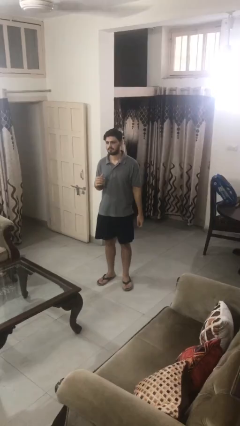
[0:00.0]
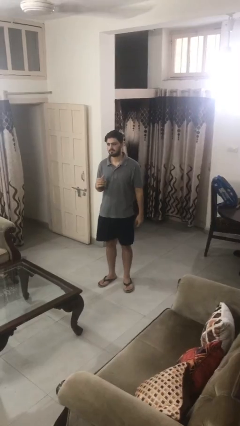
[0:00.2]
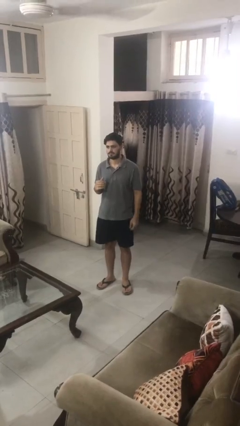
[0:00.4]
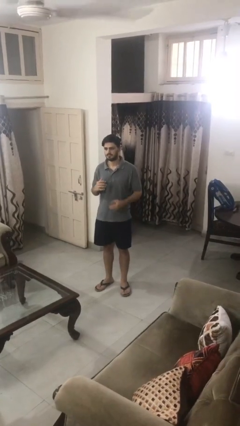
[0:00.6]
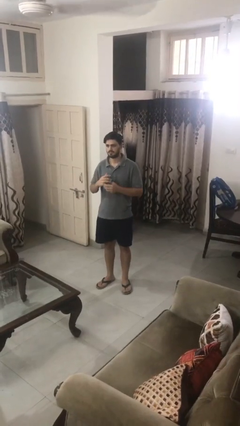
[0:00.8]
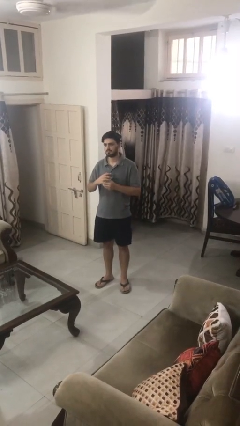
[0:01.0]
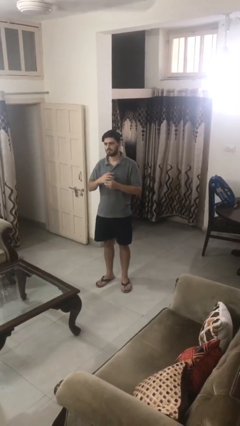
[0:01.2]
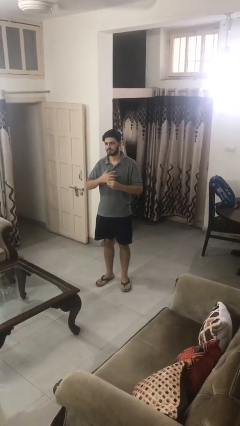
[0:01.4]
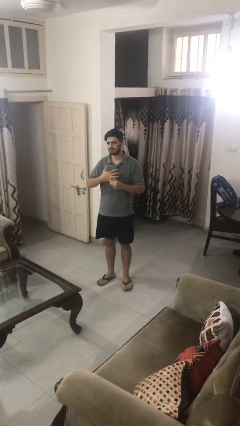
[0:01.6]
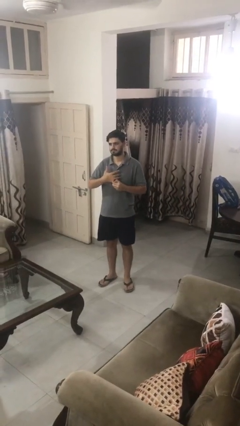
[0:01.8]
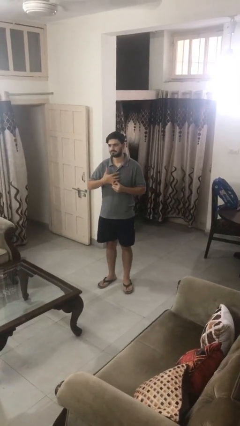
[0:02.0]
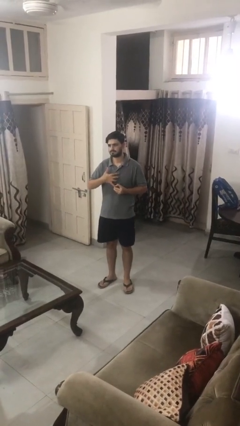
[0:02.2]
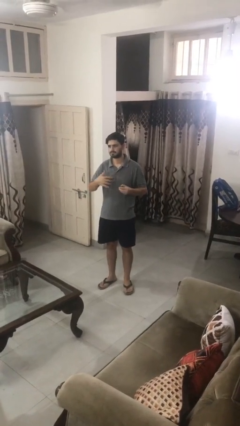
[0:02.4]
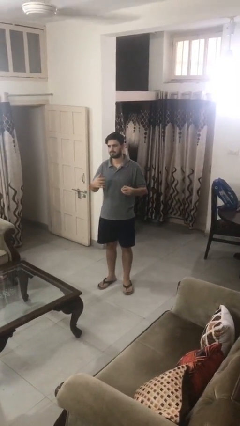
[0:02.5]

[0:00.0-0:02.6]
person takes off ring

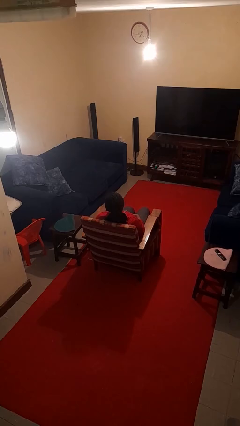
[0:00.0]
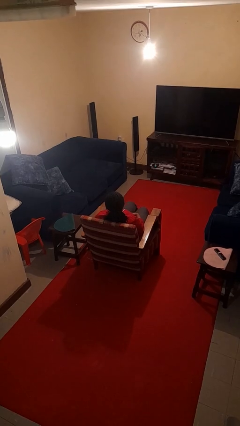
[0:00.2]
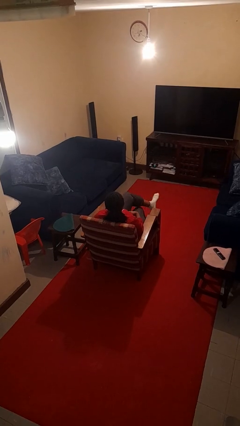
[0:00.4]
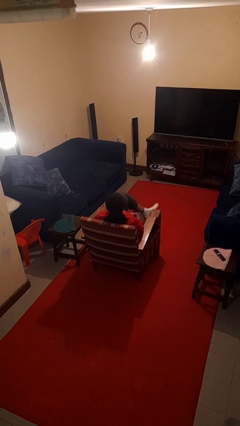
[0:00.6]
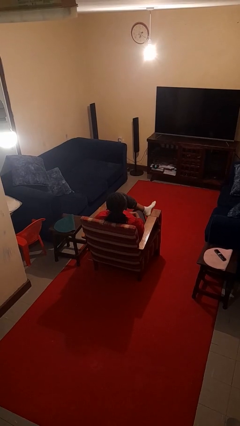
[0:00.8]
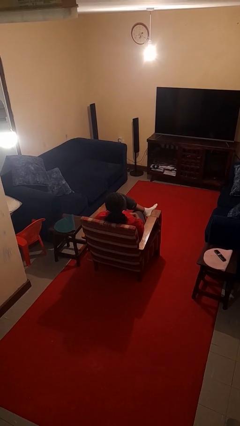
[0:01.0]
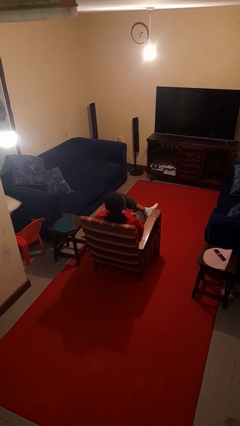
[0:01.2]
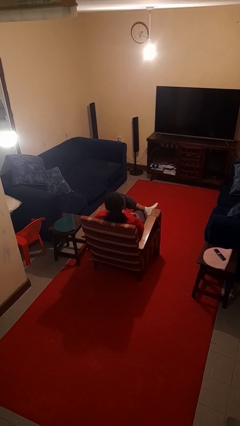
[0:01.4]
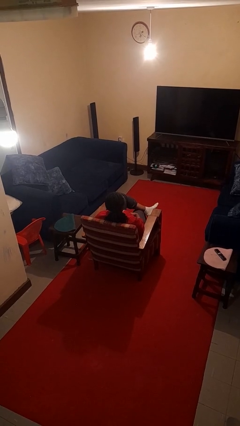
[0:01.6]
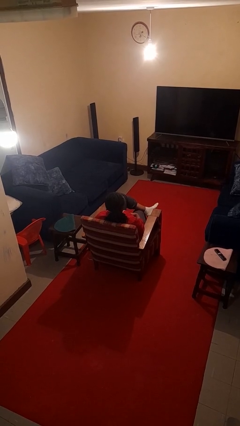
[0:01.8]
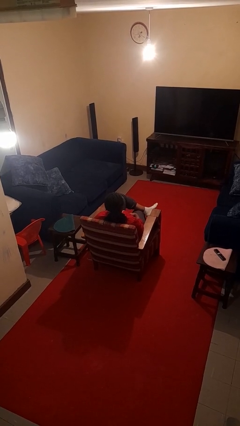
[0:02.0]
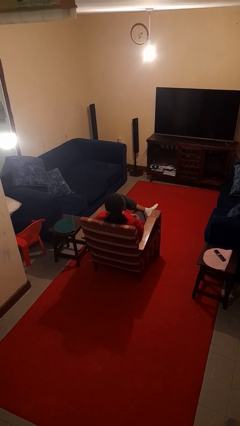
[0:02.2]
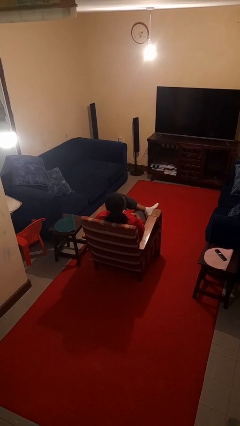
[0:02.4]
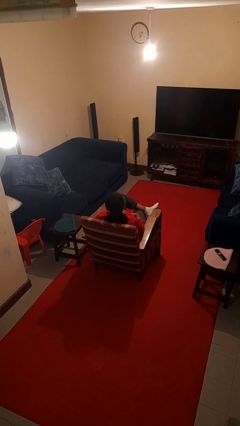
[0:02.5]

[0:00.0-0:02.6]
person crosses legs

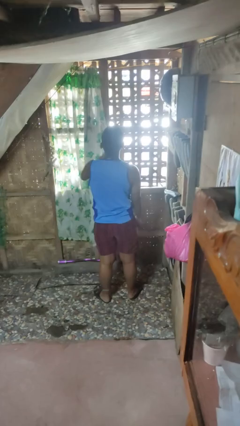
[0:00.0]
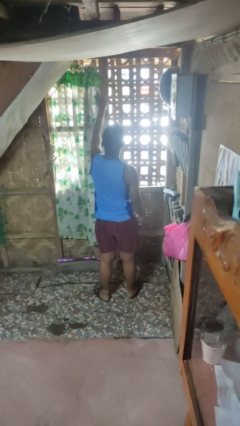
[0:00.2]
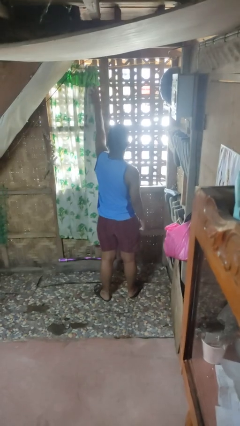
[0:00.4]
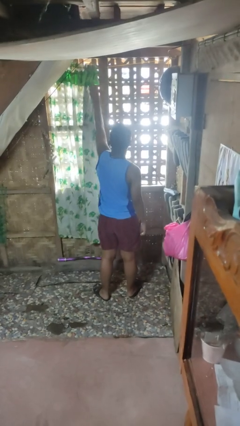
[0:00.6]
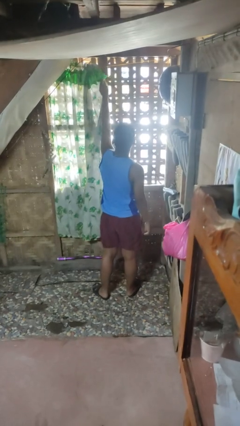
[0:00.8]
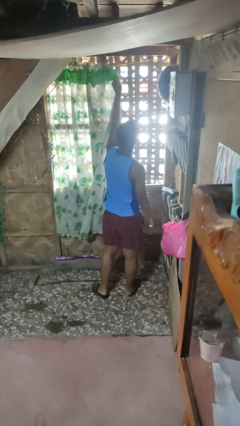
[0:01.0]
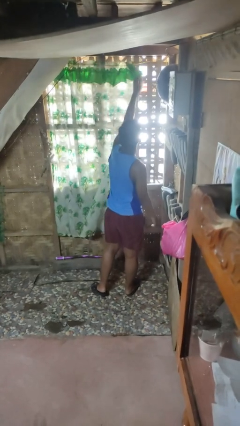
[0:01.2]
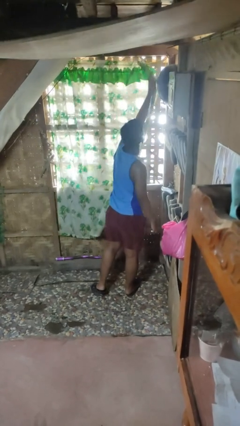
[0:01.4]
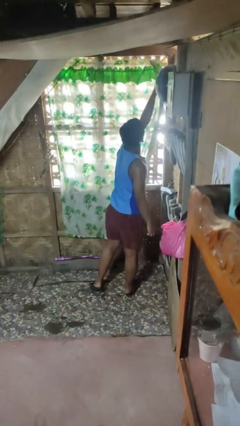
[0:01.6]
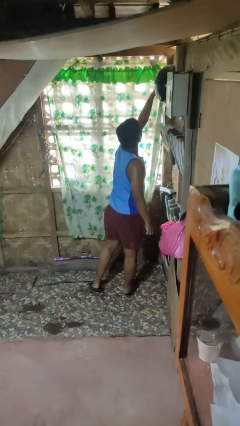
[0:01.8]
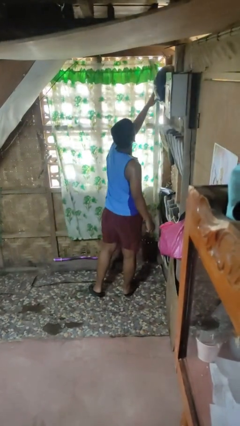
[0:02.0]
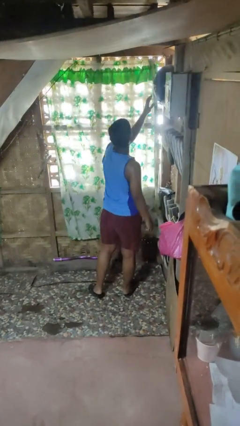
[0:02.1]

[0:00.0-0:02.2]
person closes curtains

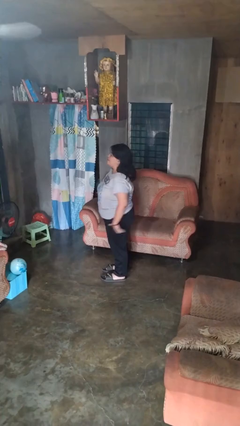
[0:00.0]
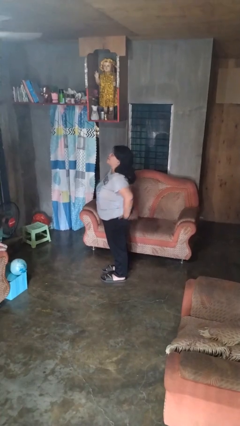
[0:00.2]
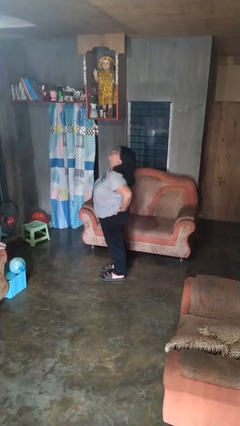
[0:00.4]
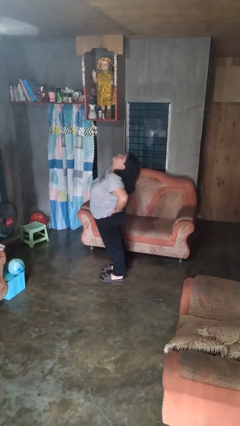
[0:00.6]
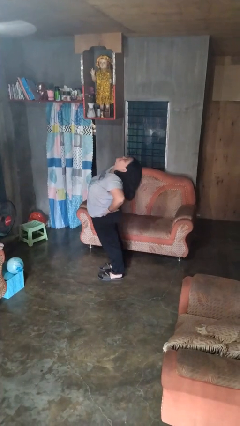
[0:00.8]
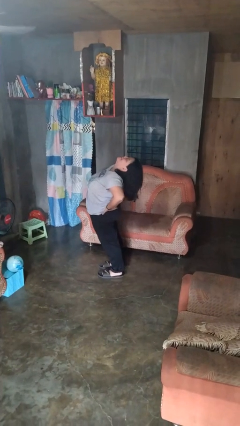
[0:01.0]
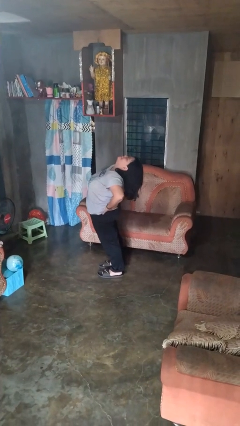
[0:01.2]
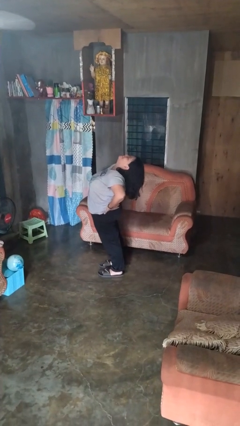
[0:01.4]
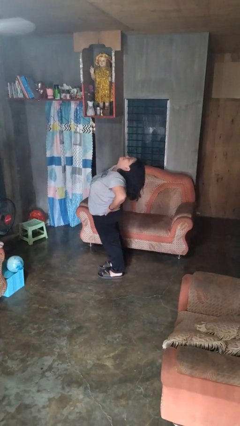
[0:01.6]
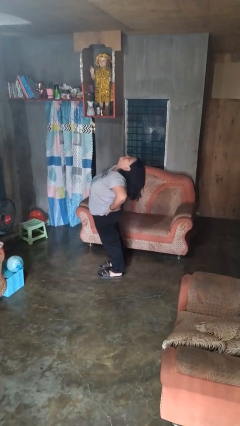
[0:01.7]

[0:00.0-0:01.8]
person stretches back

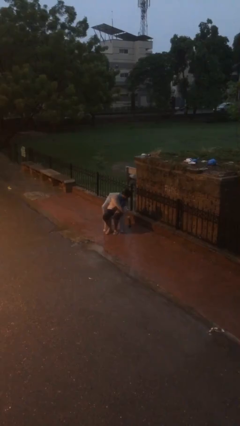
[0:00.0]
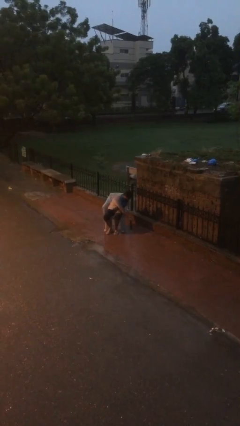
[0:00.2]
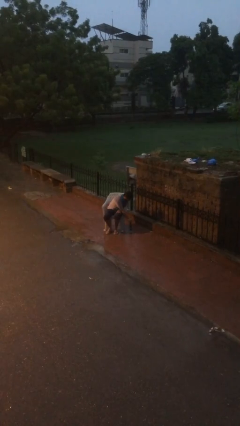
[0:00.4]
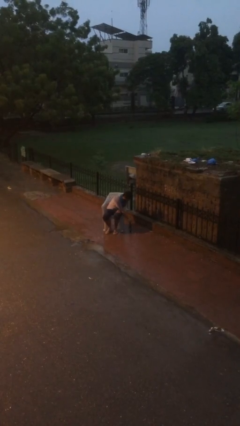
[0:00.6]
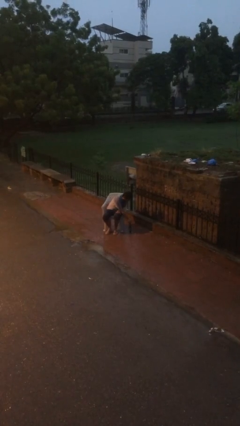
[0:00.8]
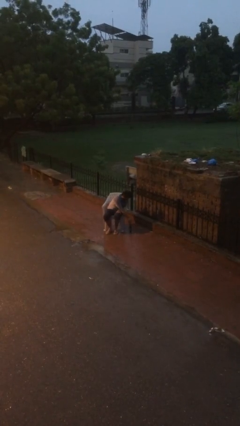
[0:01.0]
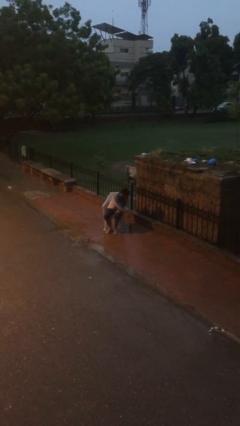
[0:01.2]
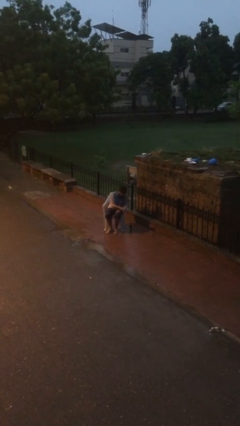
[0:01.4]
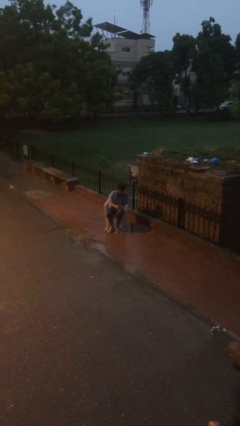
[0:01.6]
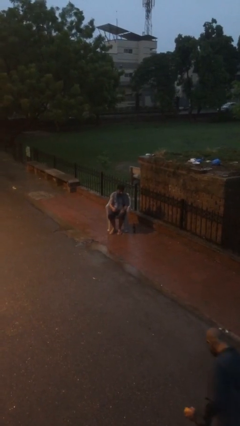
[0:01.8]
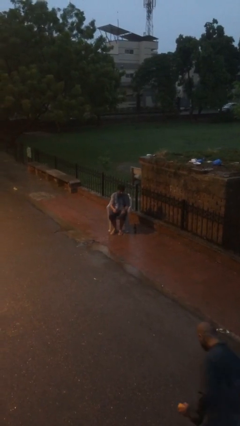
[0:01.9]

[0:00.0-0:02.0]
person puts down object on floor

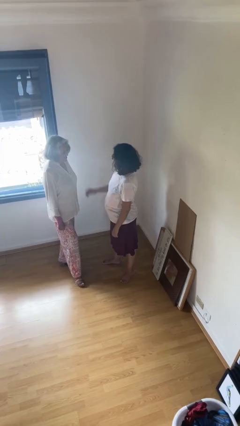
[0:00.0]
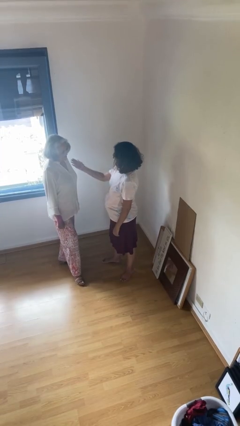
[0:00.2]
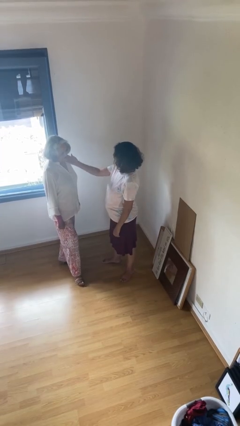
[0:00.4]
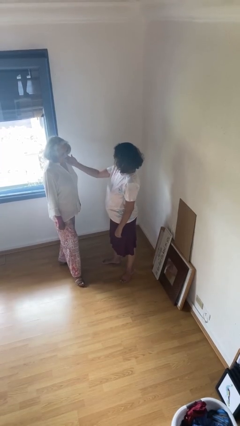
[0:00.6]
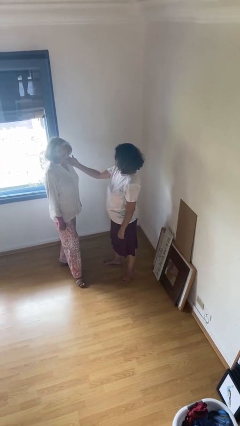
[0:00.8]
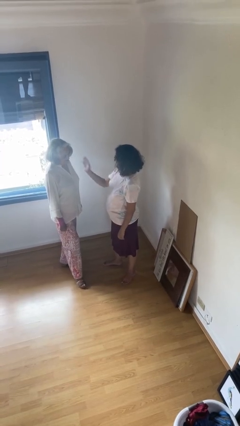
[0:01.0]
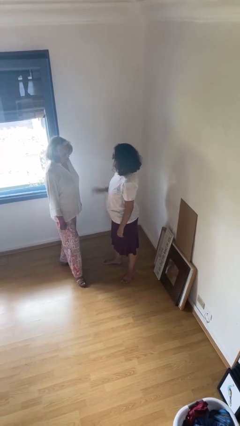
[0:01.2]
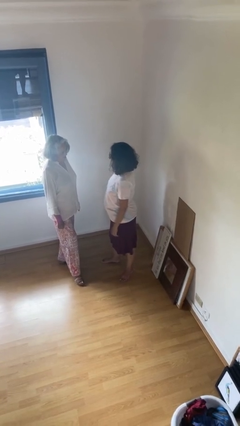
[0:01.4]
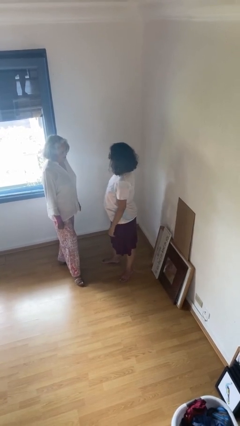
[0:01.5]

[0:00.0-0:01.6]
person touches face of person

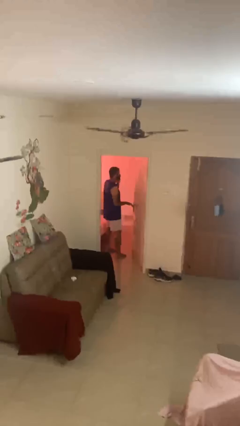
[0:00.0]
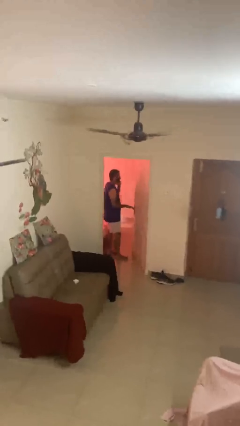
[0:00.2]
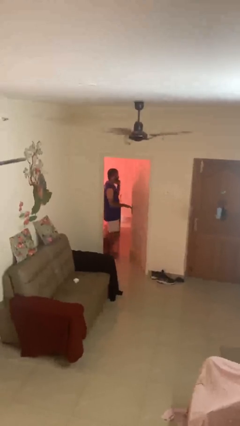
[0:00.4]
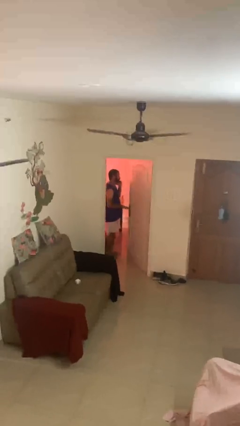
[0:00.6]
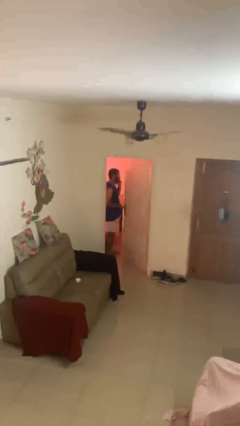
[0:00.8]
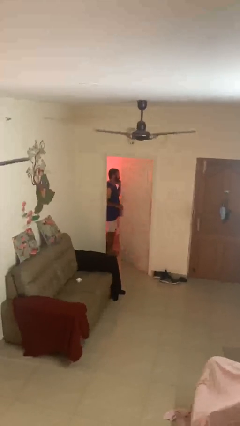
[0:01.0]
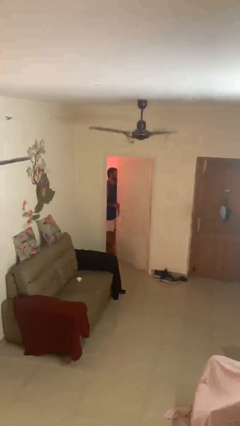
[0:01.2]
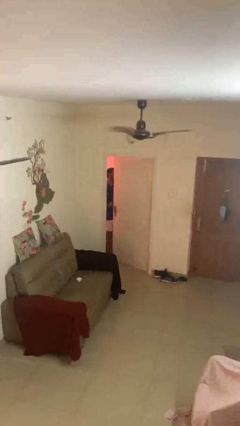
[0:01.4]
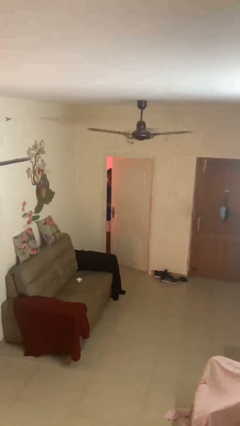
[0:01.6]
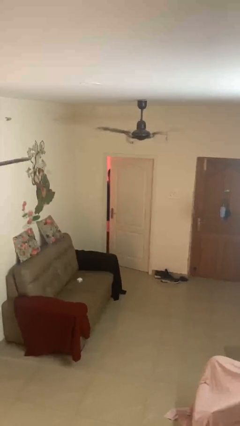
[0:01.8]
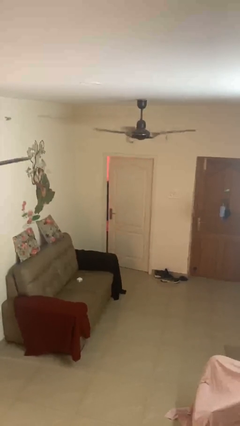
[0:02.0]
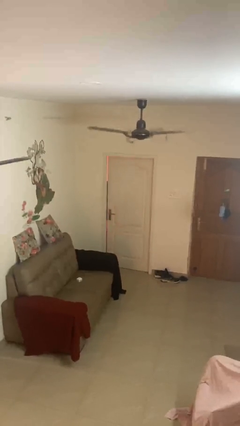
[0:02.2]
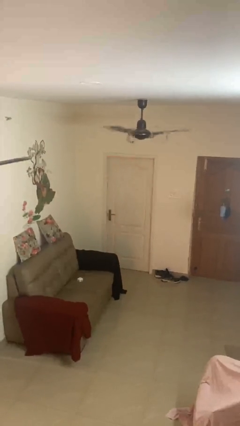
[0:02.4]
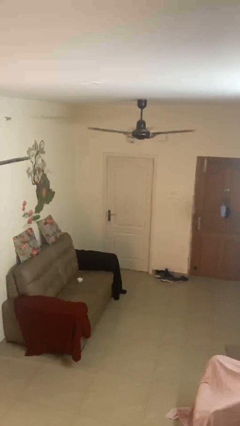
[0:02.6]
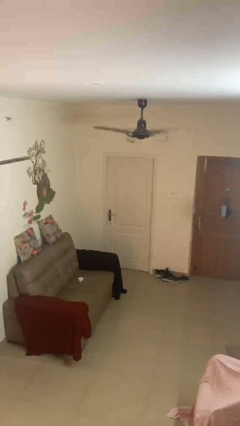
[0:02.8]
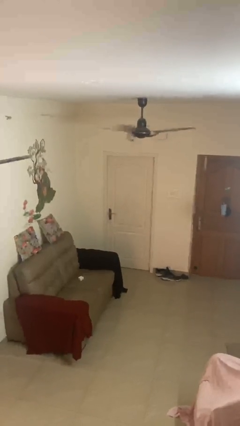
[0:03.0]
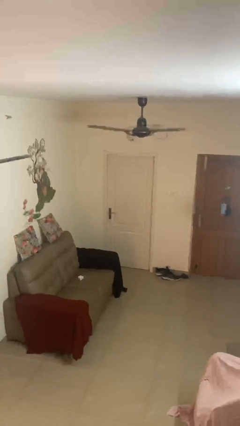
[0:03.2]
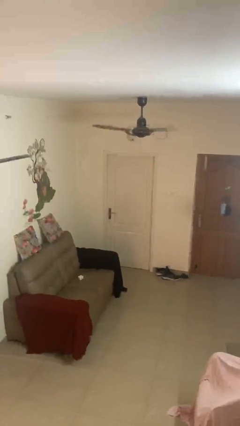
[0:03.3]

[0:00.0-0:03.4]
person closes facility door

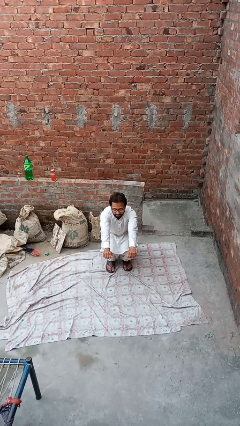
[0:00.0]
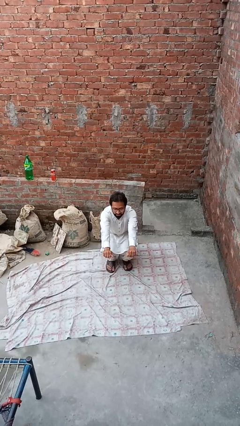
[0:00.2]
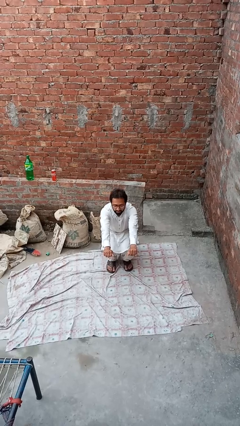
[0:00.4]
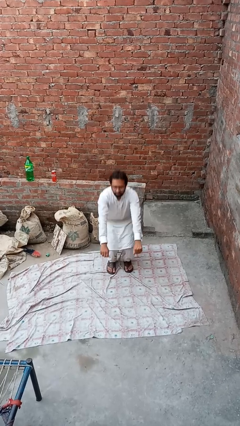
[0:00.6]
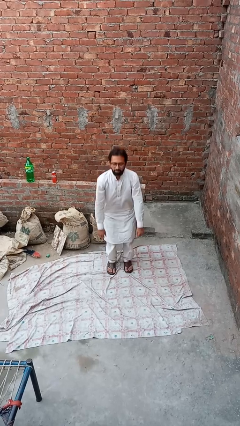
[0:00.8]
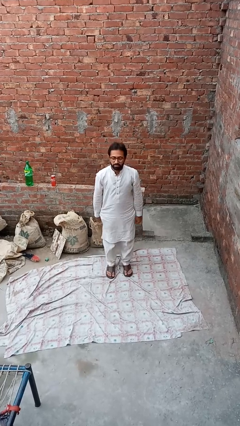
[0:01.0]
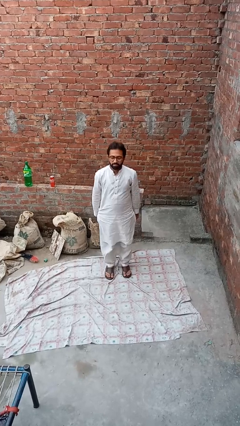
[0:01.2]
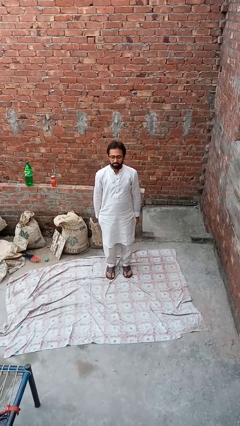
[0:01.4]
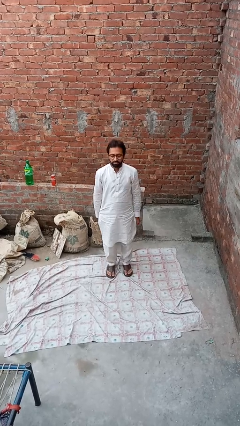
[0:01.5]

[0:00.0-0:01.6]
person stands up
